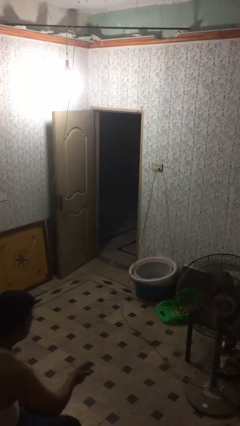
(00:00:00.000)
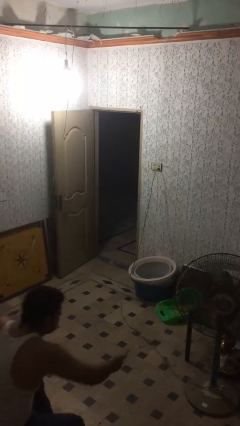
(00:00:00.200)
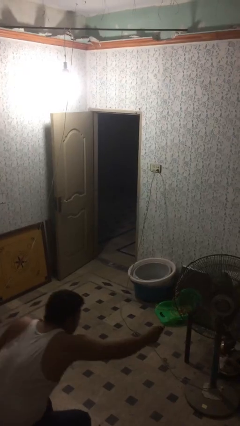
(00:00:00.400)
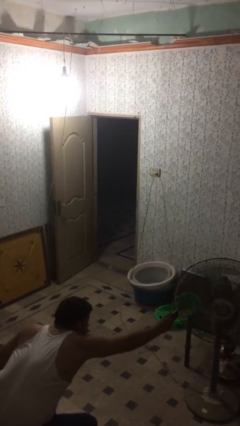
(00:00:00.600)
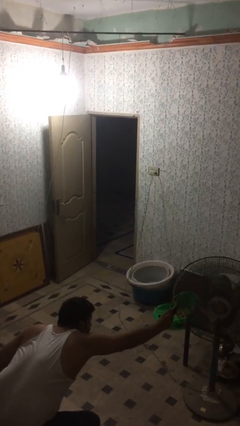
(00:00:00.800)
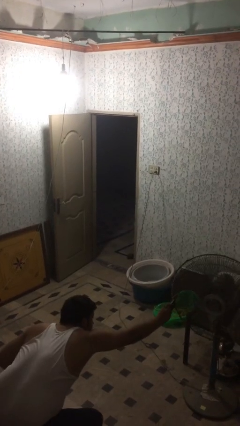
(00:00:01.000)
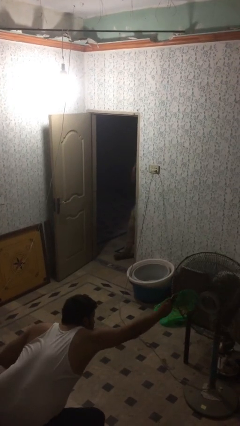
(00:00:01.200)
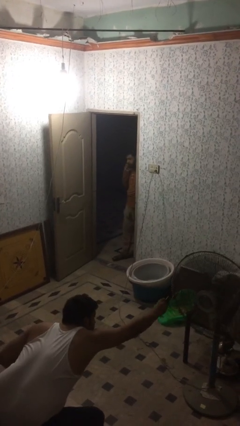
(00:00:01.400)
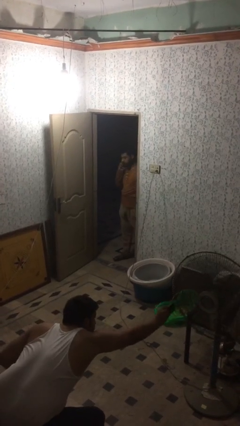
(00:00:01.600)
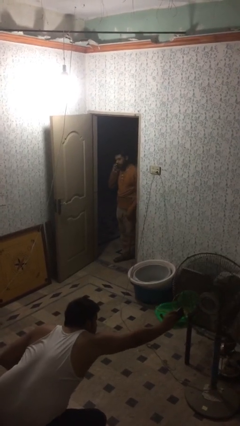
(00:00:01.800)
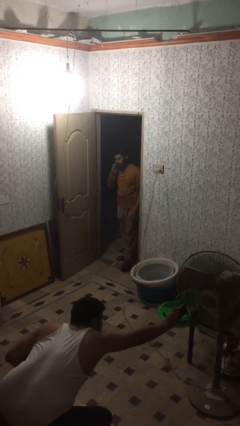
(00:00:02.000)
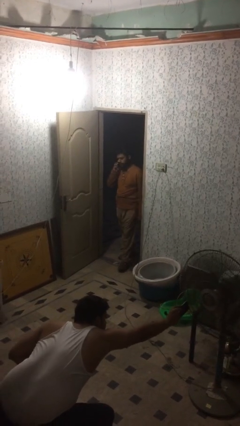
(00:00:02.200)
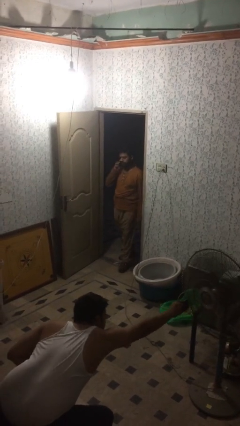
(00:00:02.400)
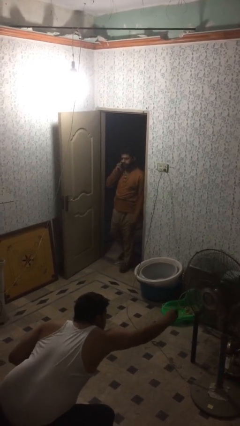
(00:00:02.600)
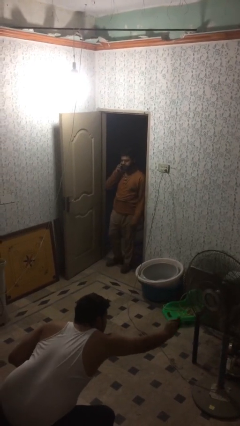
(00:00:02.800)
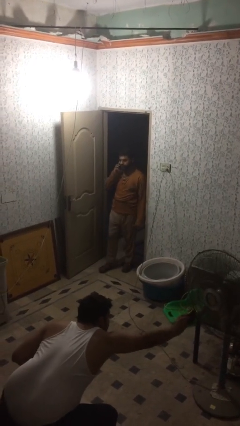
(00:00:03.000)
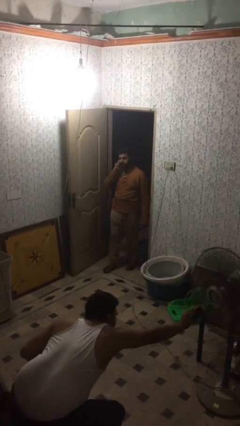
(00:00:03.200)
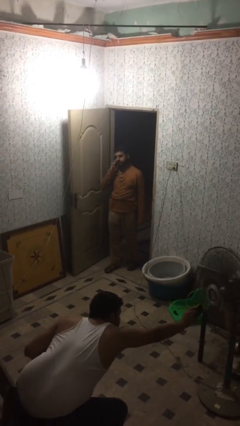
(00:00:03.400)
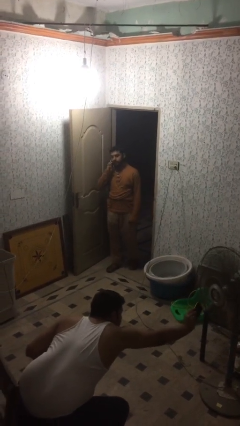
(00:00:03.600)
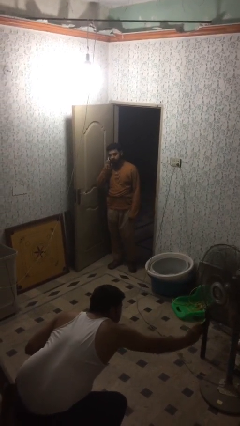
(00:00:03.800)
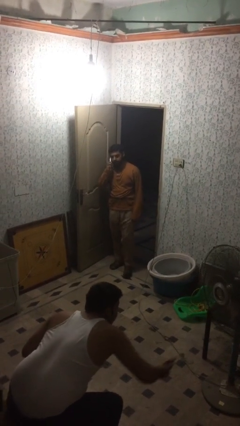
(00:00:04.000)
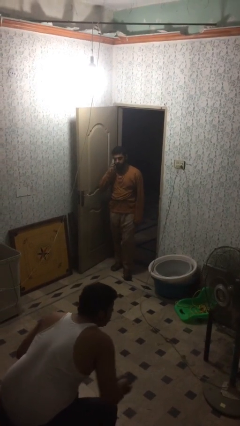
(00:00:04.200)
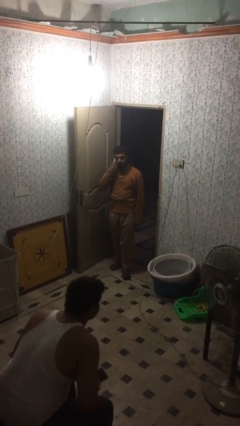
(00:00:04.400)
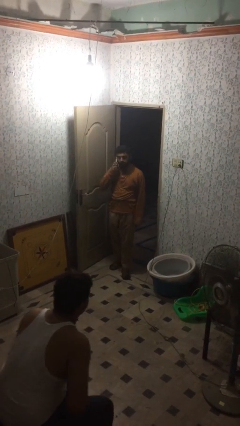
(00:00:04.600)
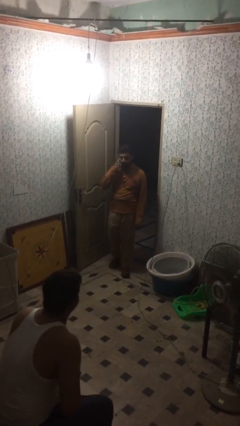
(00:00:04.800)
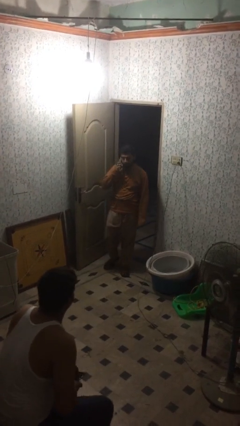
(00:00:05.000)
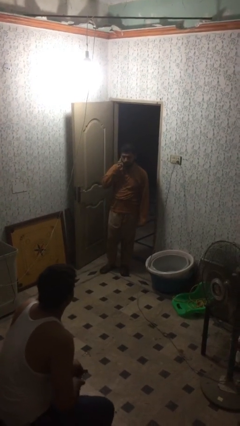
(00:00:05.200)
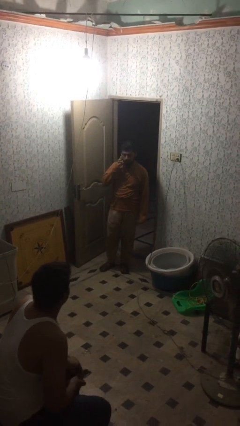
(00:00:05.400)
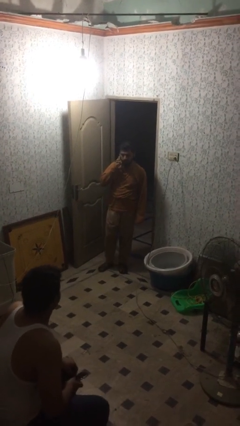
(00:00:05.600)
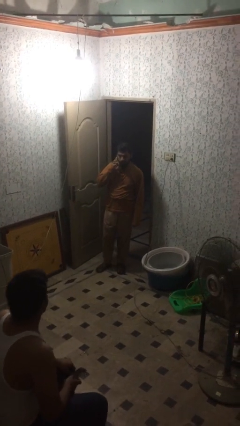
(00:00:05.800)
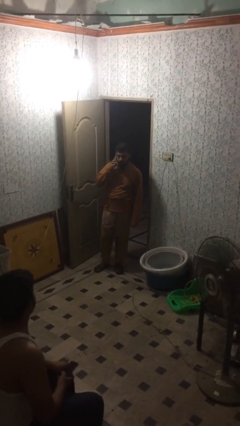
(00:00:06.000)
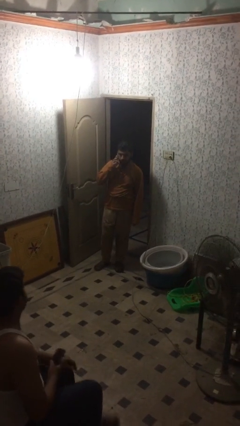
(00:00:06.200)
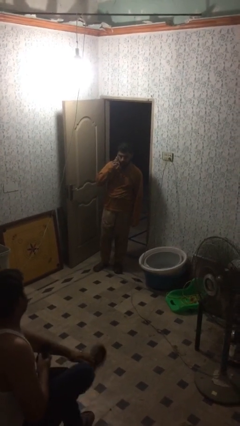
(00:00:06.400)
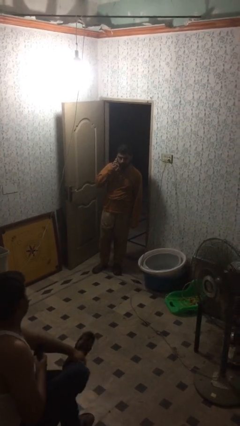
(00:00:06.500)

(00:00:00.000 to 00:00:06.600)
person enters scene through structure

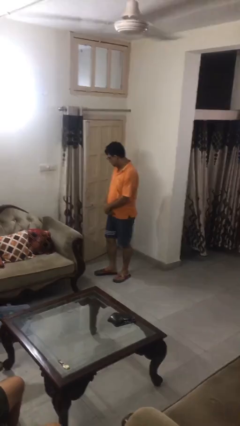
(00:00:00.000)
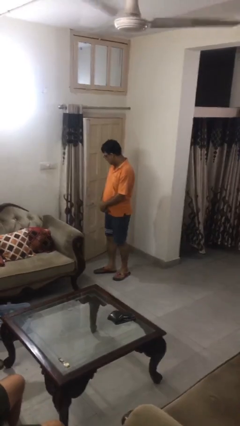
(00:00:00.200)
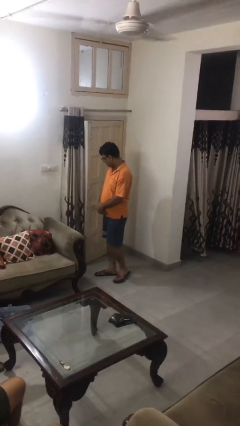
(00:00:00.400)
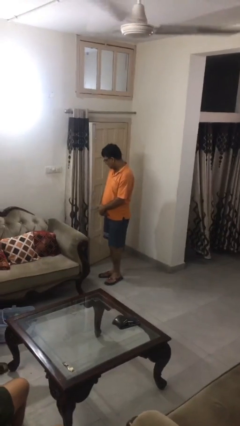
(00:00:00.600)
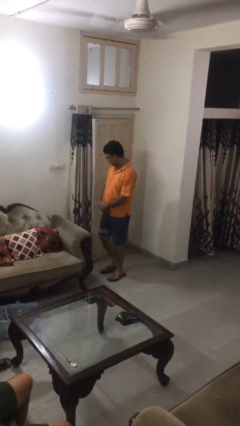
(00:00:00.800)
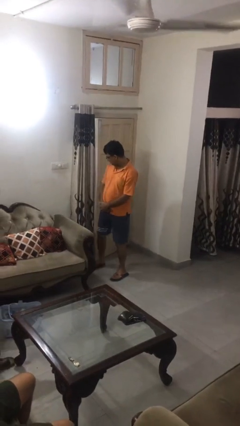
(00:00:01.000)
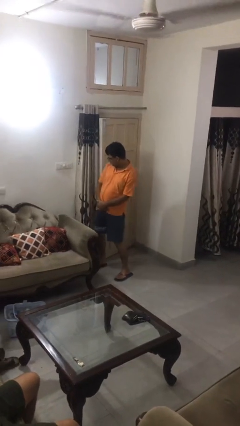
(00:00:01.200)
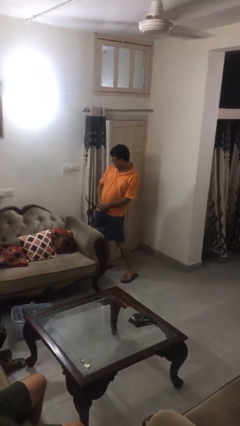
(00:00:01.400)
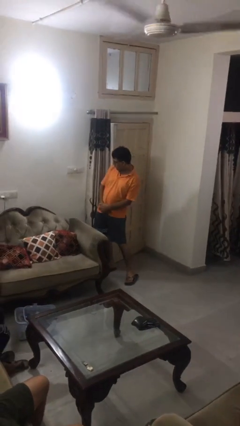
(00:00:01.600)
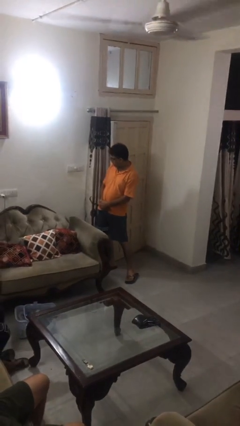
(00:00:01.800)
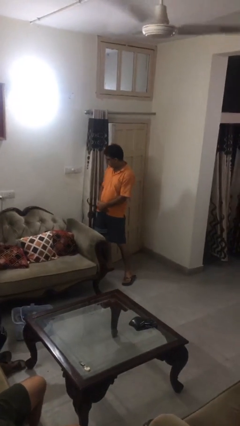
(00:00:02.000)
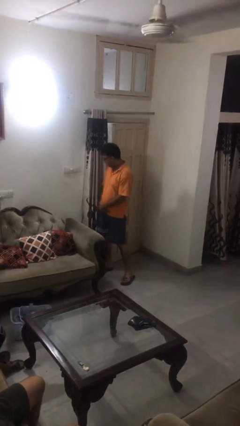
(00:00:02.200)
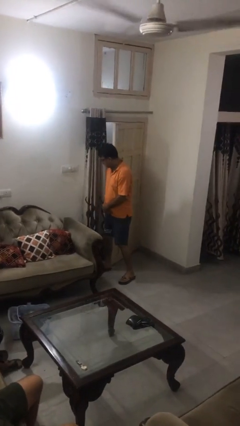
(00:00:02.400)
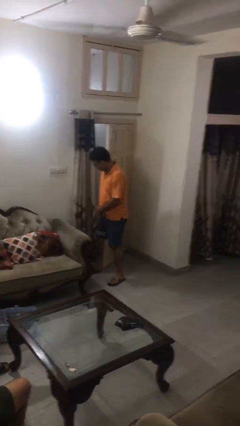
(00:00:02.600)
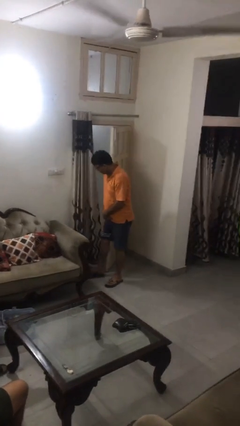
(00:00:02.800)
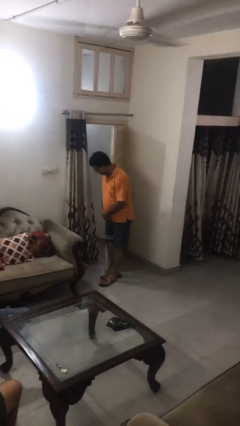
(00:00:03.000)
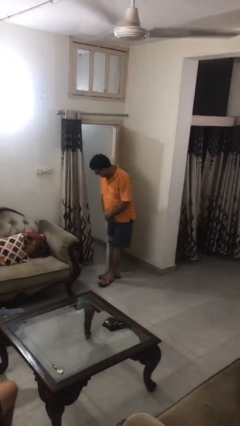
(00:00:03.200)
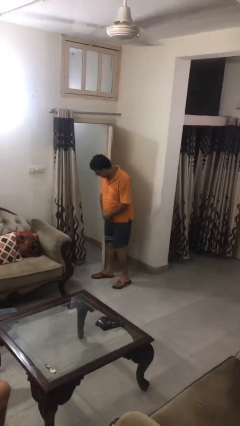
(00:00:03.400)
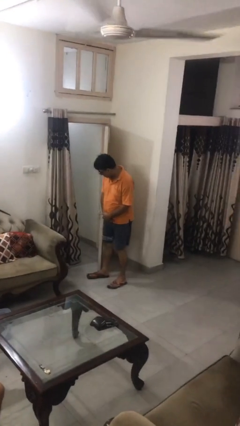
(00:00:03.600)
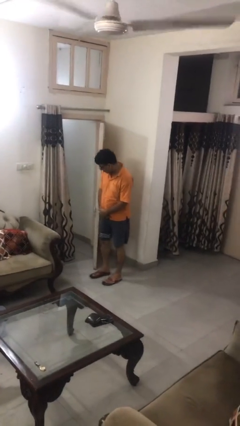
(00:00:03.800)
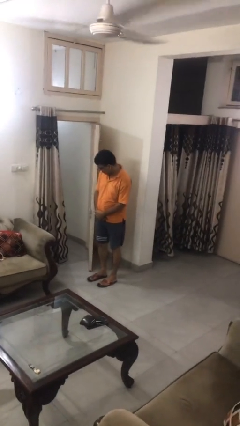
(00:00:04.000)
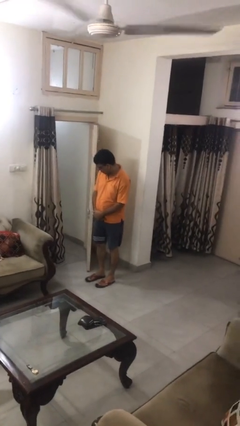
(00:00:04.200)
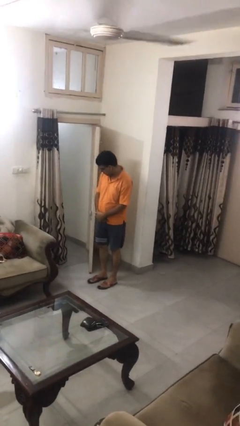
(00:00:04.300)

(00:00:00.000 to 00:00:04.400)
person opens facility door

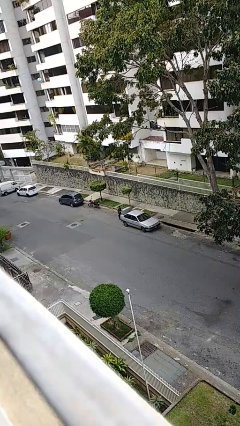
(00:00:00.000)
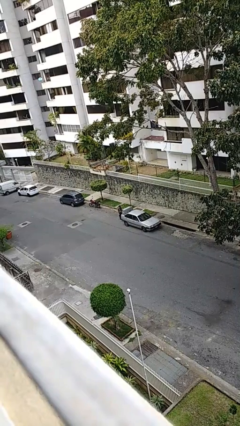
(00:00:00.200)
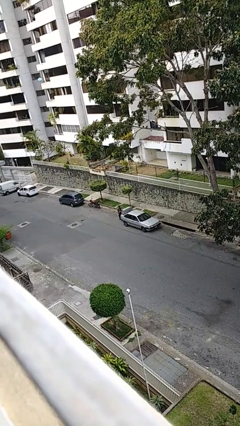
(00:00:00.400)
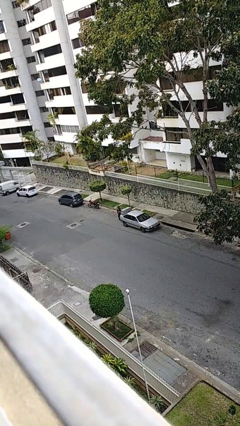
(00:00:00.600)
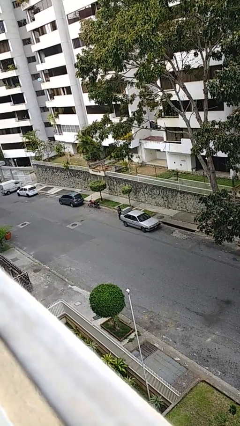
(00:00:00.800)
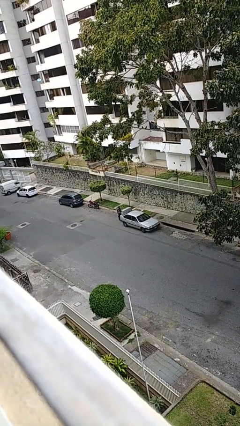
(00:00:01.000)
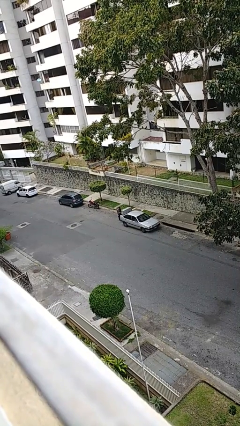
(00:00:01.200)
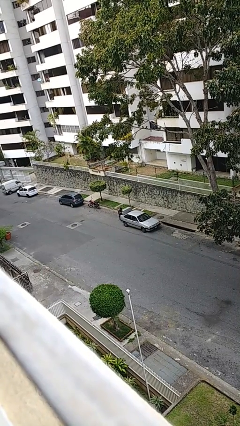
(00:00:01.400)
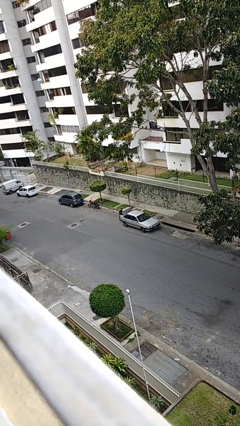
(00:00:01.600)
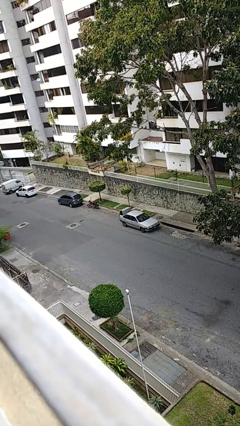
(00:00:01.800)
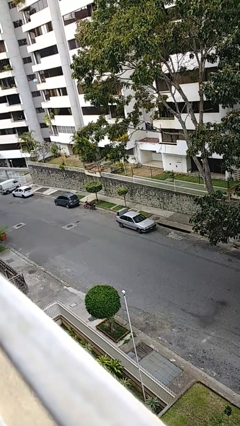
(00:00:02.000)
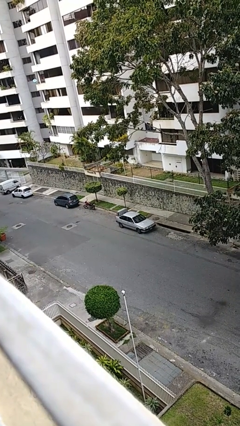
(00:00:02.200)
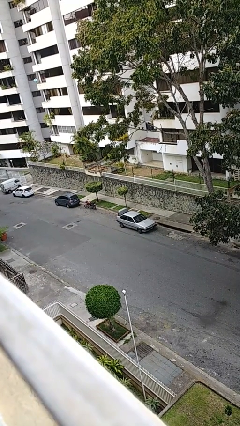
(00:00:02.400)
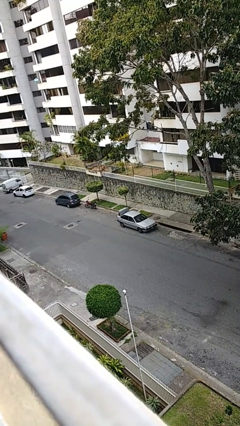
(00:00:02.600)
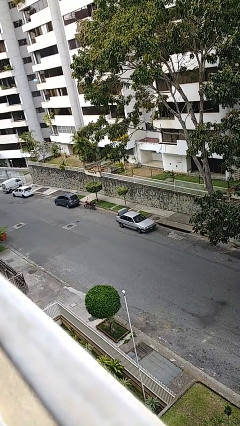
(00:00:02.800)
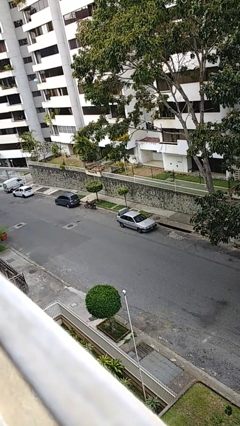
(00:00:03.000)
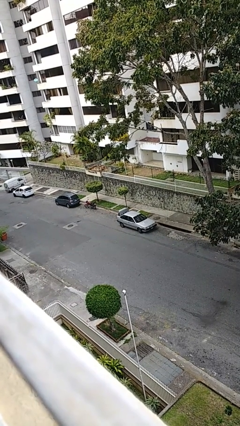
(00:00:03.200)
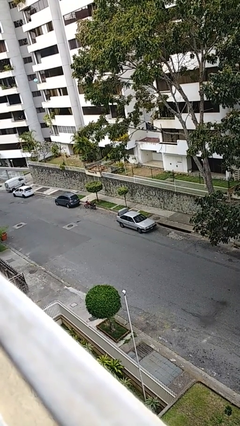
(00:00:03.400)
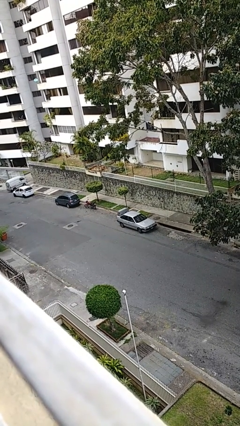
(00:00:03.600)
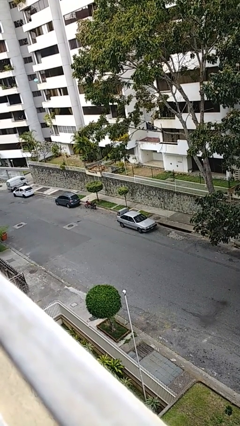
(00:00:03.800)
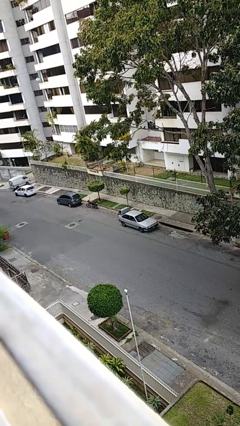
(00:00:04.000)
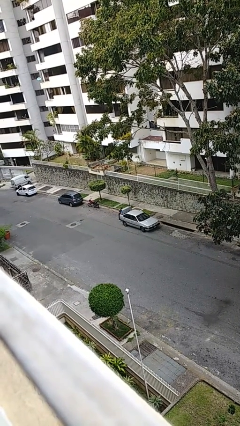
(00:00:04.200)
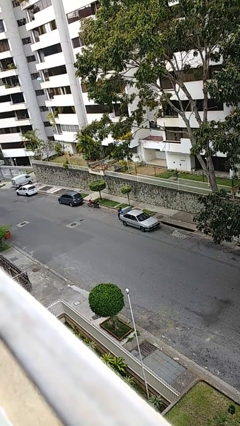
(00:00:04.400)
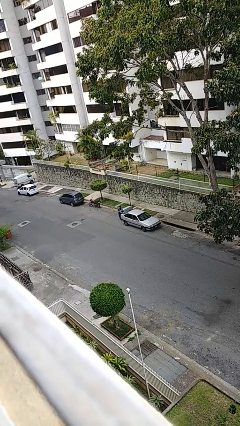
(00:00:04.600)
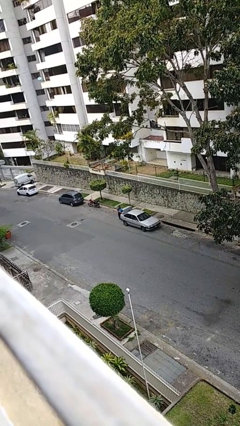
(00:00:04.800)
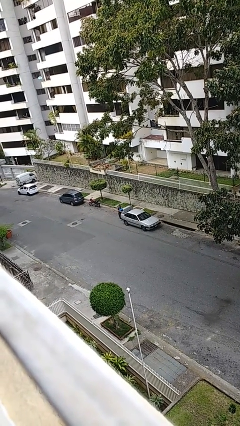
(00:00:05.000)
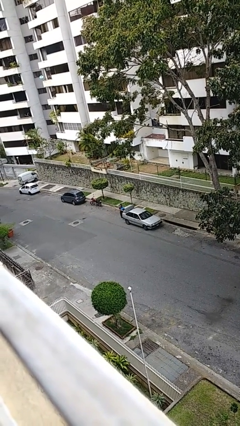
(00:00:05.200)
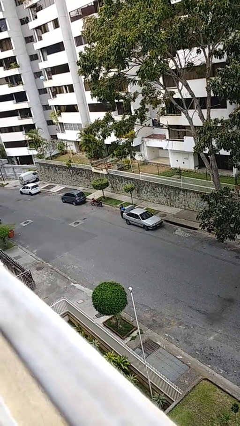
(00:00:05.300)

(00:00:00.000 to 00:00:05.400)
person unloads car

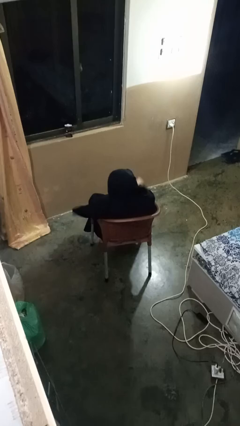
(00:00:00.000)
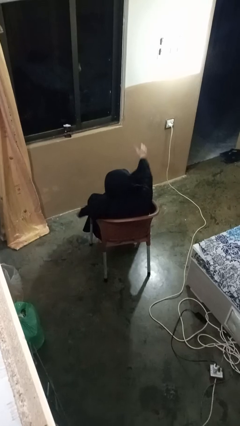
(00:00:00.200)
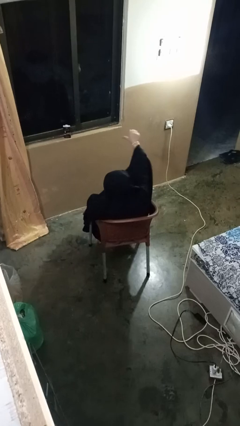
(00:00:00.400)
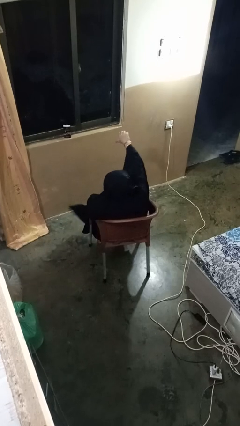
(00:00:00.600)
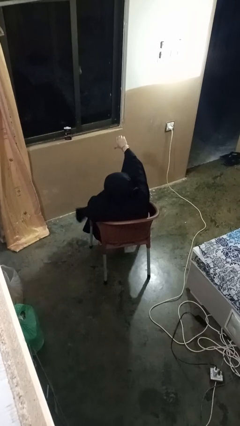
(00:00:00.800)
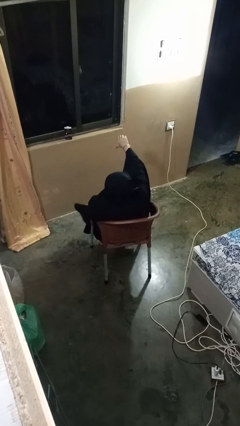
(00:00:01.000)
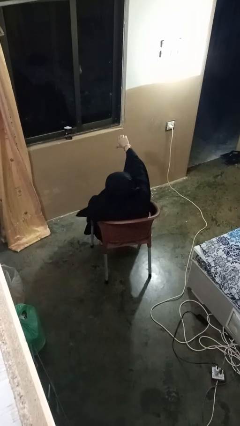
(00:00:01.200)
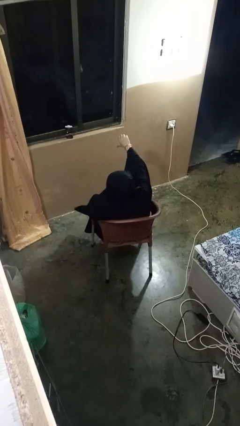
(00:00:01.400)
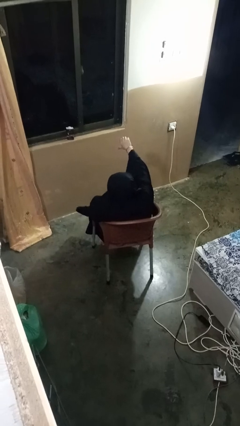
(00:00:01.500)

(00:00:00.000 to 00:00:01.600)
person gestures thumbs down
